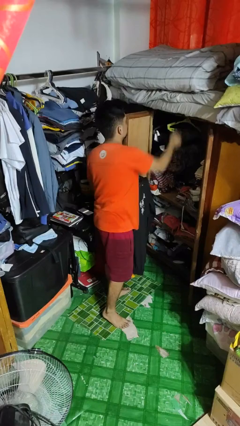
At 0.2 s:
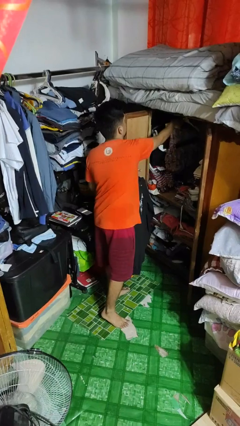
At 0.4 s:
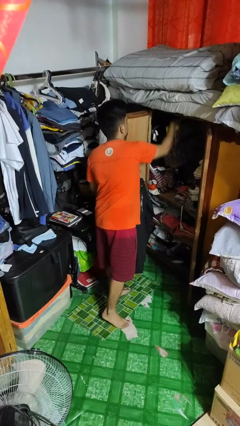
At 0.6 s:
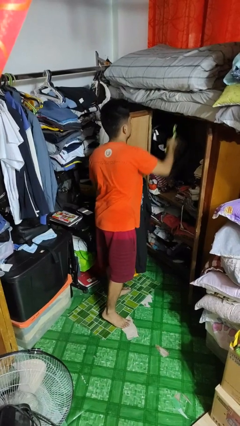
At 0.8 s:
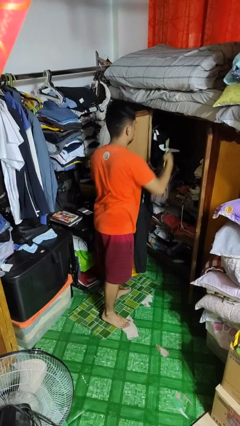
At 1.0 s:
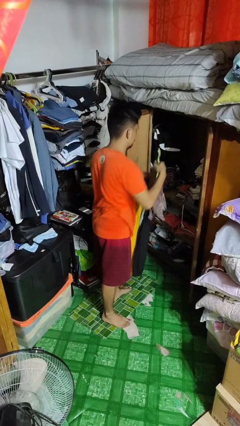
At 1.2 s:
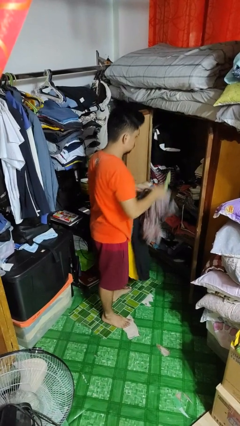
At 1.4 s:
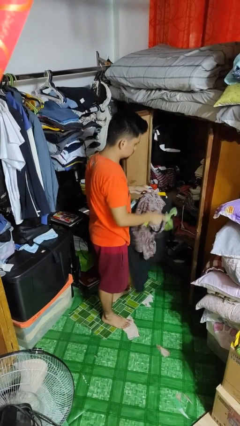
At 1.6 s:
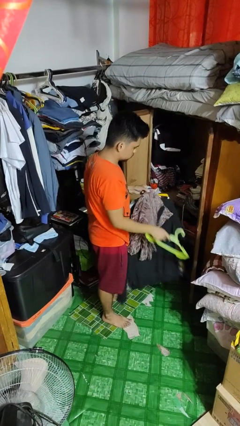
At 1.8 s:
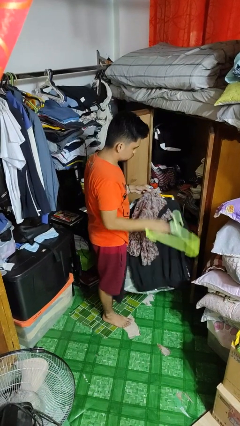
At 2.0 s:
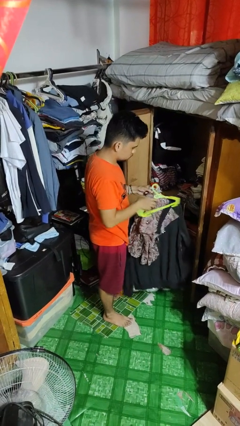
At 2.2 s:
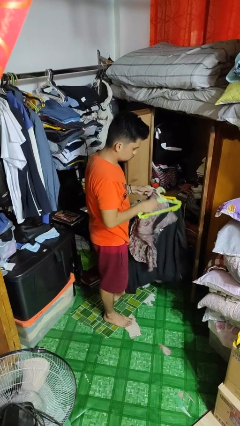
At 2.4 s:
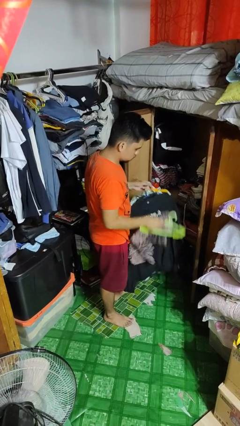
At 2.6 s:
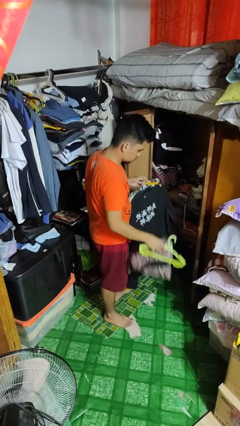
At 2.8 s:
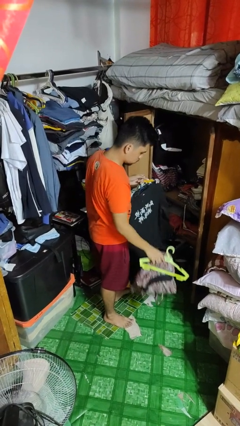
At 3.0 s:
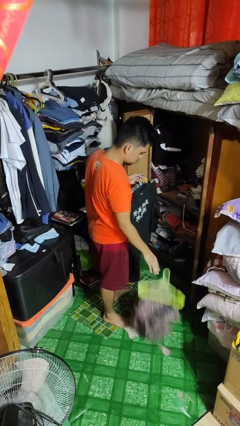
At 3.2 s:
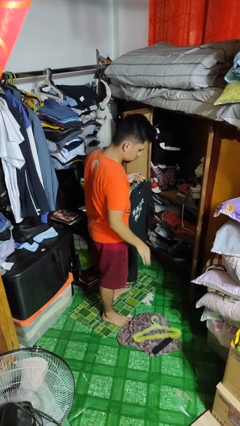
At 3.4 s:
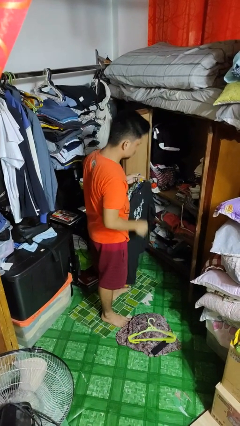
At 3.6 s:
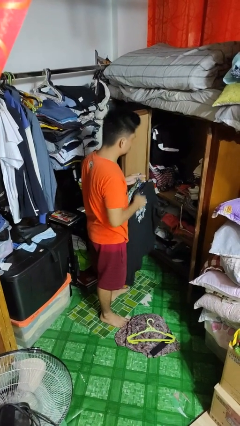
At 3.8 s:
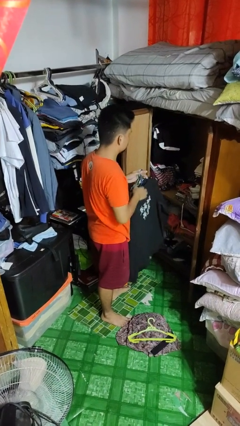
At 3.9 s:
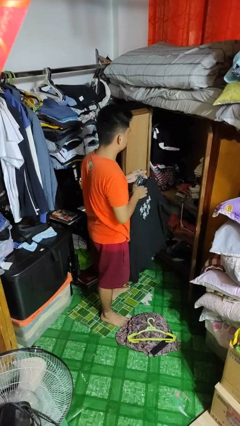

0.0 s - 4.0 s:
person takes clothes from closet

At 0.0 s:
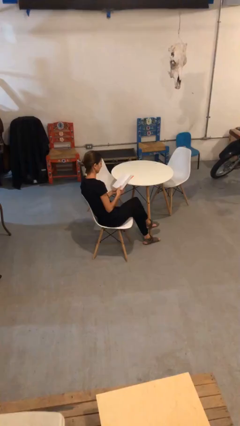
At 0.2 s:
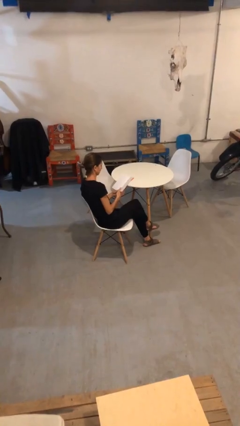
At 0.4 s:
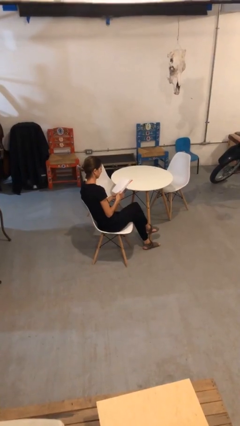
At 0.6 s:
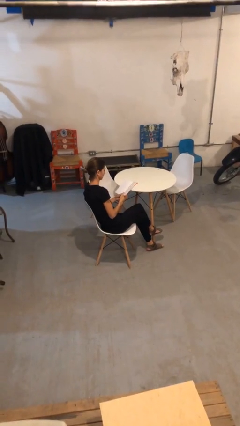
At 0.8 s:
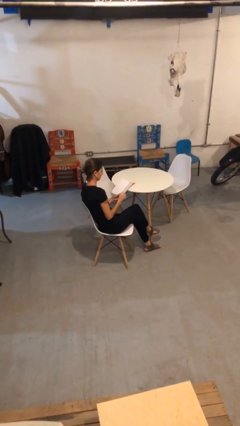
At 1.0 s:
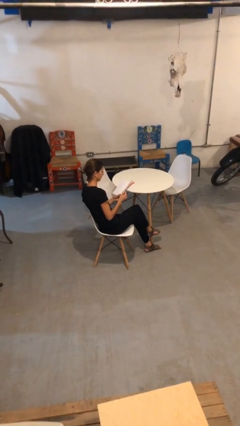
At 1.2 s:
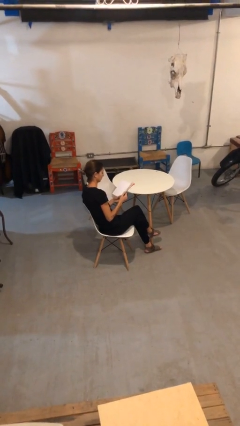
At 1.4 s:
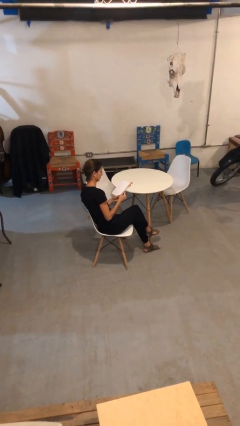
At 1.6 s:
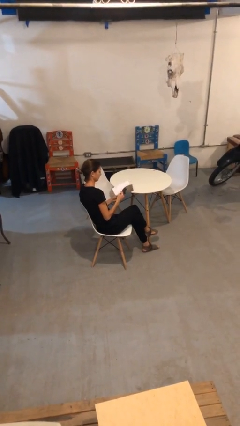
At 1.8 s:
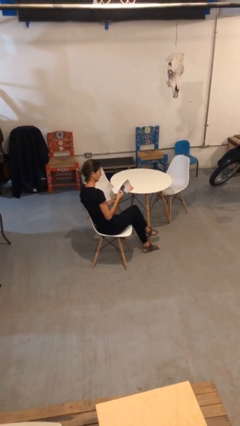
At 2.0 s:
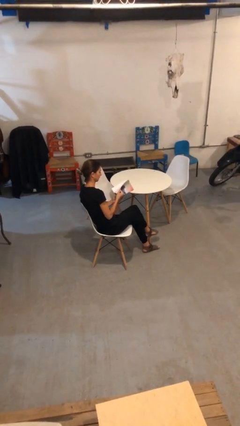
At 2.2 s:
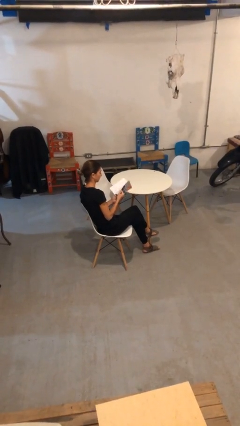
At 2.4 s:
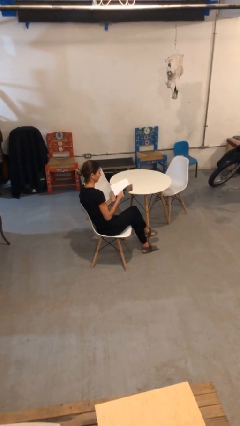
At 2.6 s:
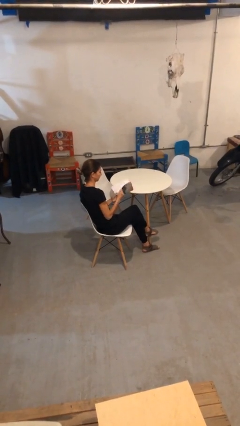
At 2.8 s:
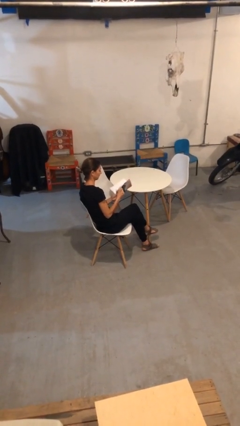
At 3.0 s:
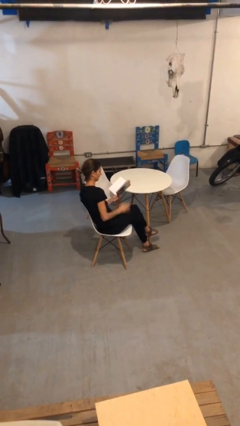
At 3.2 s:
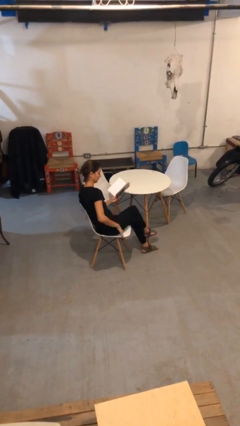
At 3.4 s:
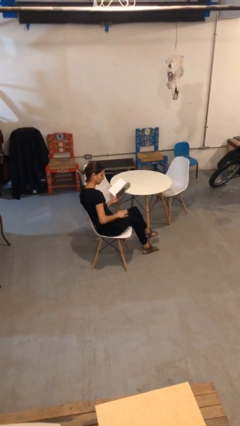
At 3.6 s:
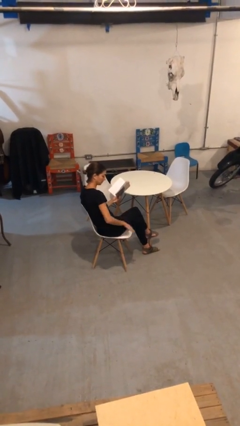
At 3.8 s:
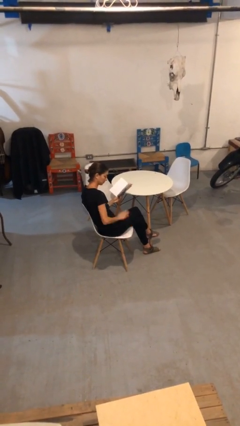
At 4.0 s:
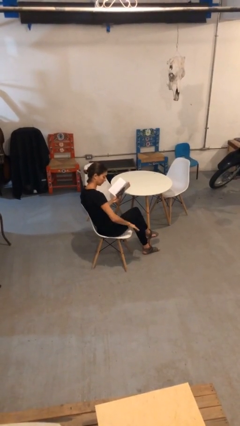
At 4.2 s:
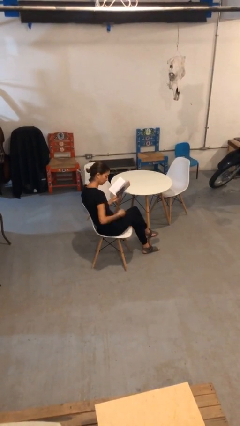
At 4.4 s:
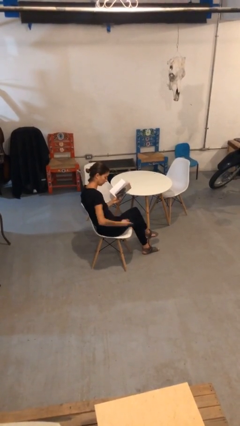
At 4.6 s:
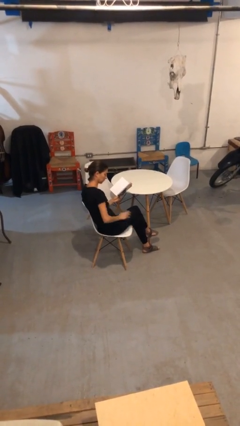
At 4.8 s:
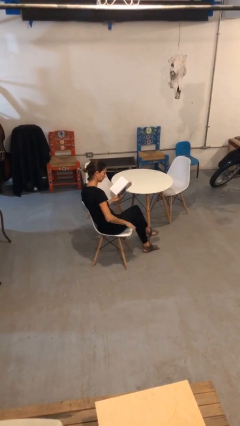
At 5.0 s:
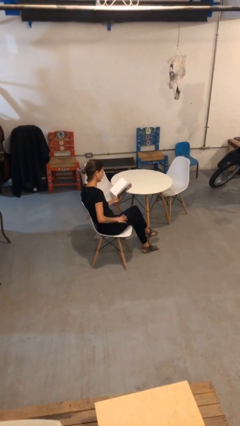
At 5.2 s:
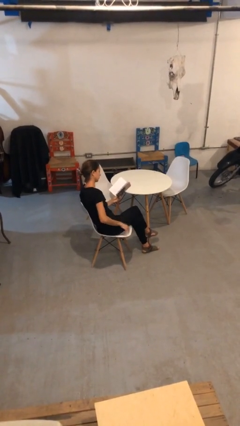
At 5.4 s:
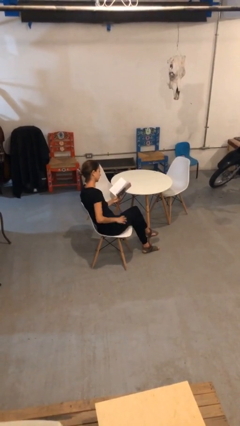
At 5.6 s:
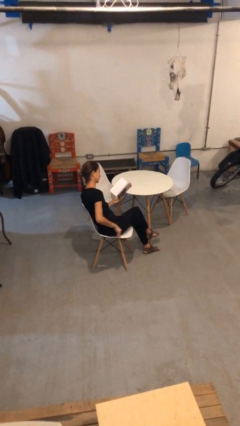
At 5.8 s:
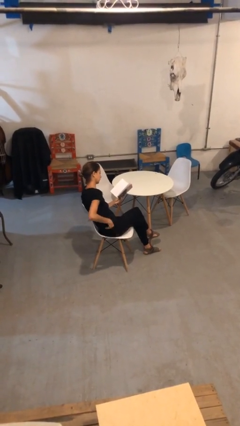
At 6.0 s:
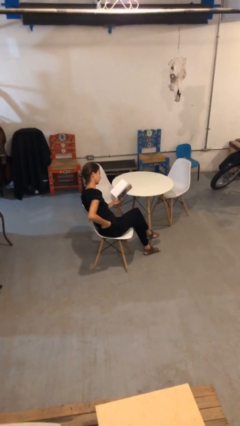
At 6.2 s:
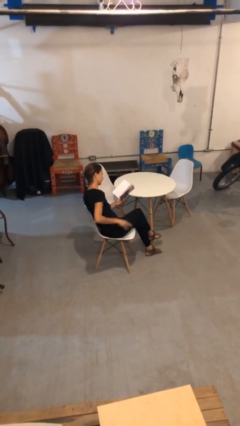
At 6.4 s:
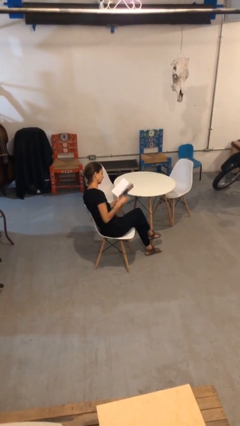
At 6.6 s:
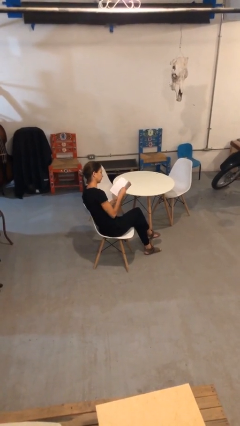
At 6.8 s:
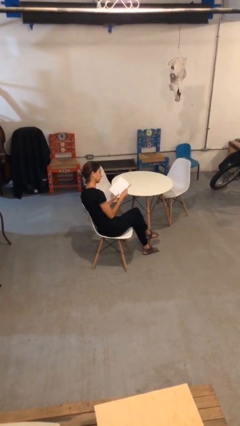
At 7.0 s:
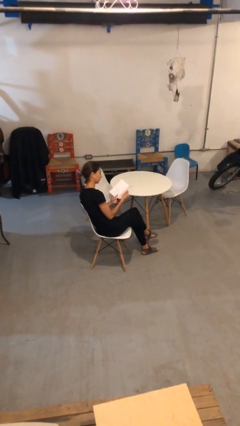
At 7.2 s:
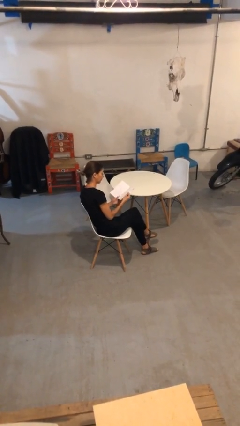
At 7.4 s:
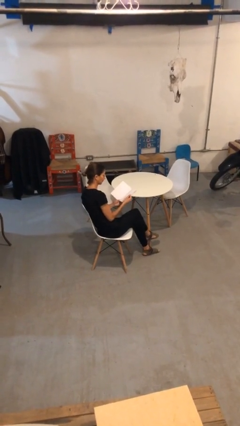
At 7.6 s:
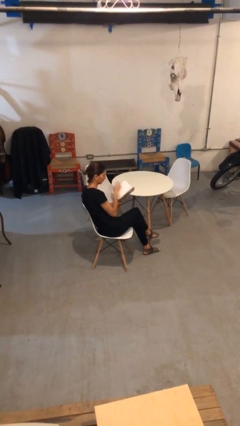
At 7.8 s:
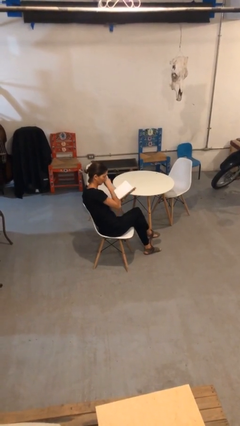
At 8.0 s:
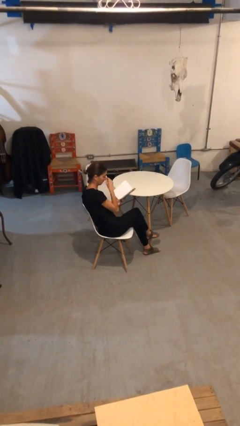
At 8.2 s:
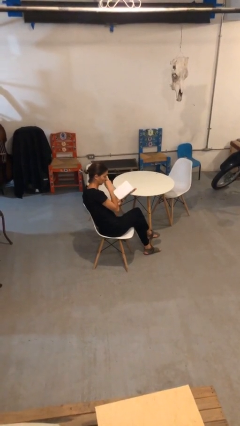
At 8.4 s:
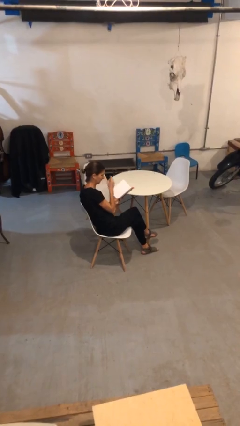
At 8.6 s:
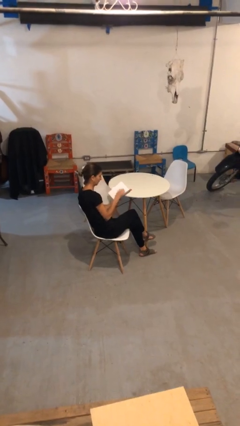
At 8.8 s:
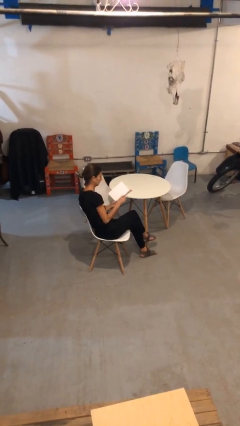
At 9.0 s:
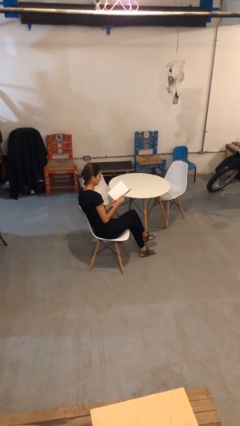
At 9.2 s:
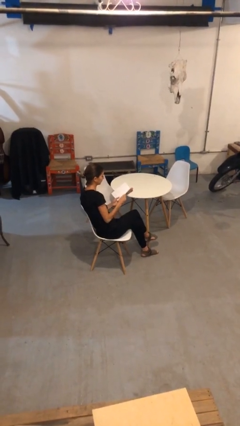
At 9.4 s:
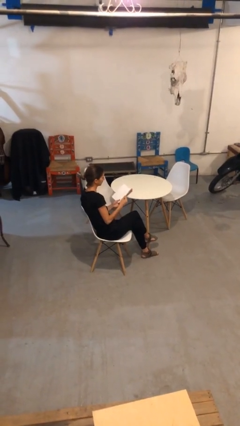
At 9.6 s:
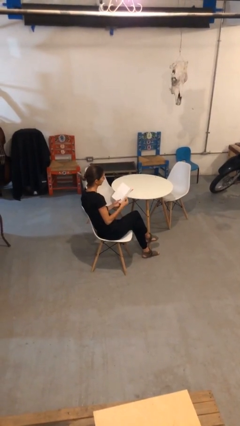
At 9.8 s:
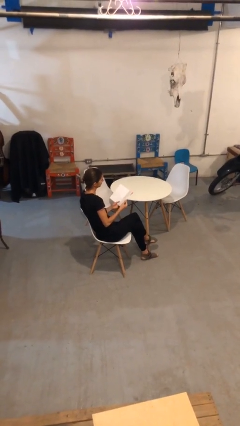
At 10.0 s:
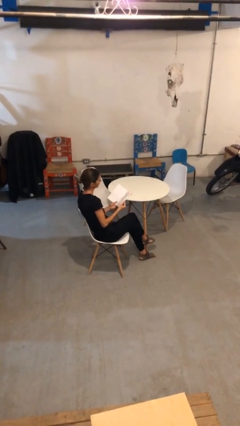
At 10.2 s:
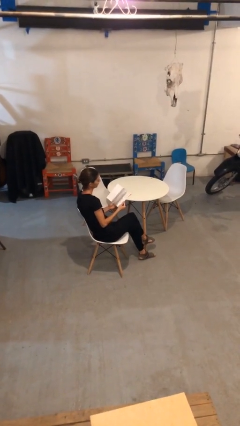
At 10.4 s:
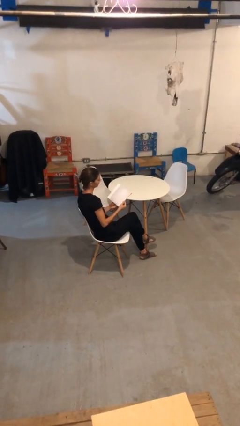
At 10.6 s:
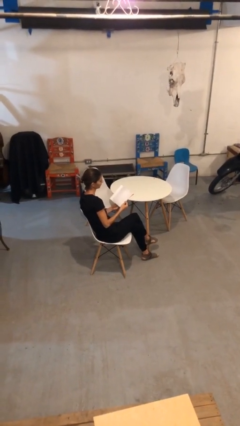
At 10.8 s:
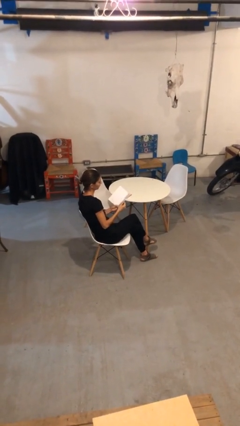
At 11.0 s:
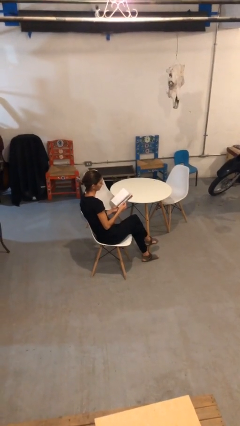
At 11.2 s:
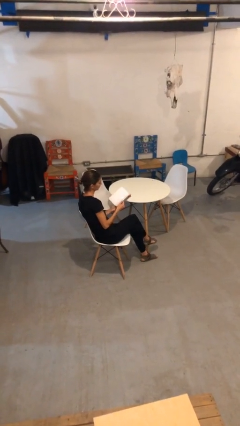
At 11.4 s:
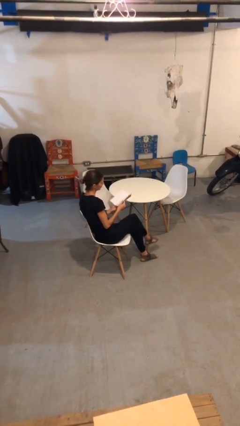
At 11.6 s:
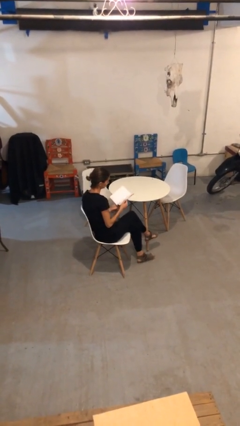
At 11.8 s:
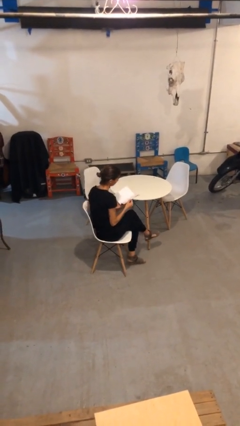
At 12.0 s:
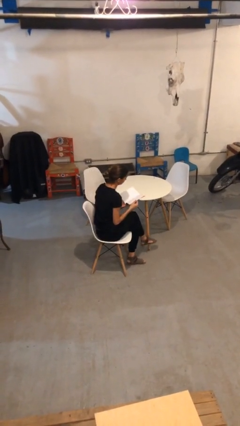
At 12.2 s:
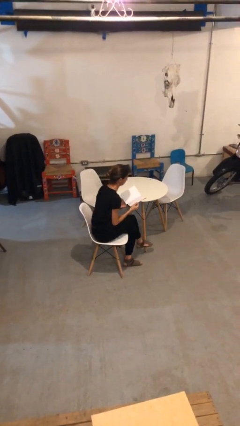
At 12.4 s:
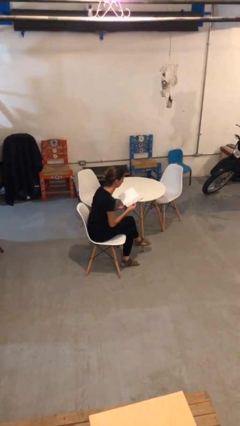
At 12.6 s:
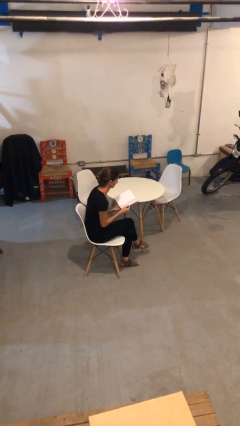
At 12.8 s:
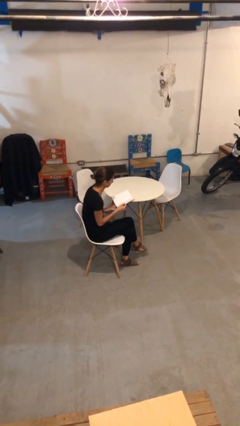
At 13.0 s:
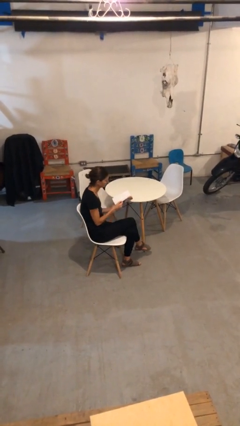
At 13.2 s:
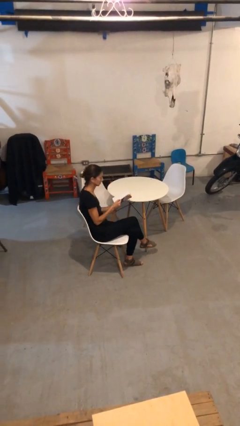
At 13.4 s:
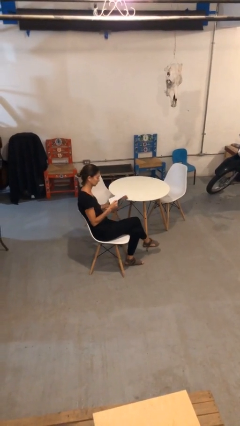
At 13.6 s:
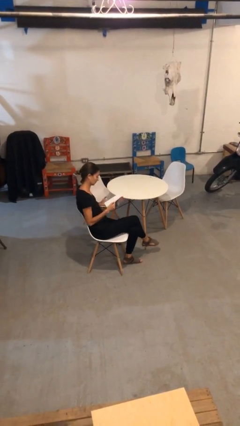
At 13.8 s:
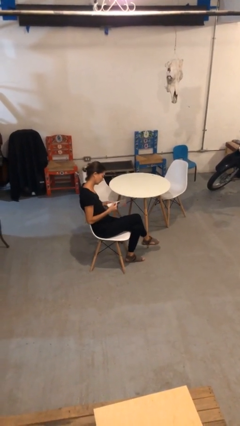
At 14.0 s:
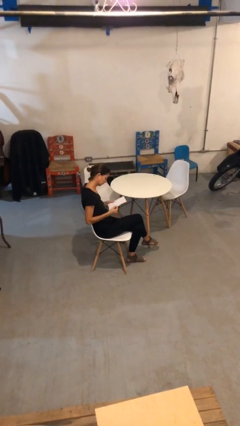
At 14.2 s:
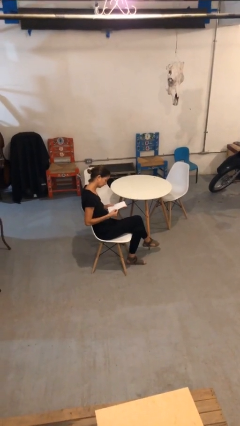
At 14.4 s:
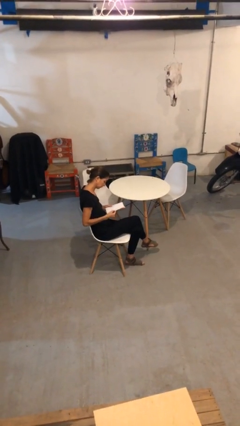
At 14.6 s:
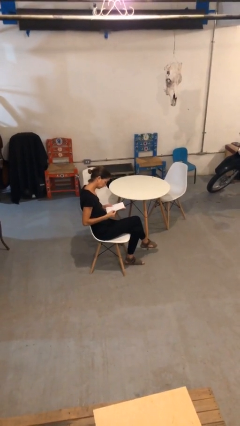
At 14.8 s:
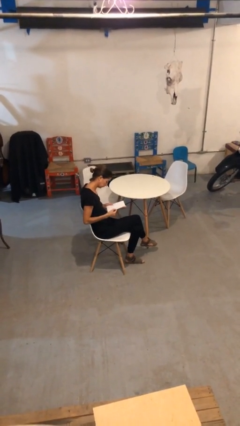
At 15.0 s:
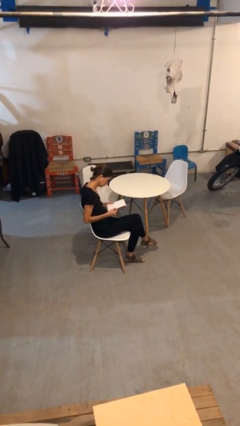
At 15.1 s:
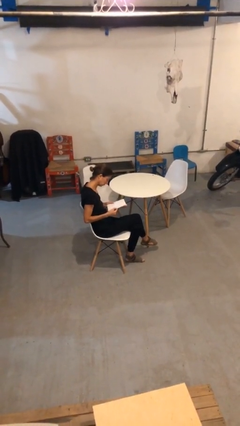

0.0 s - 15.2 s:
person reads document
